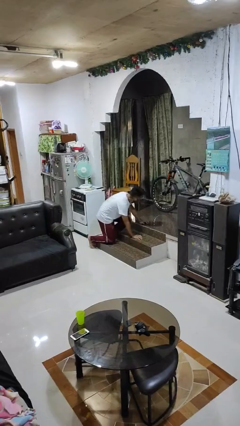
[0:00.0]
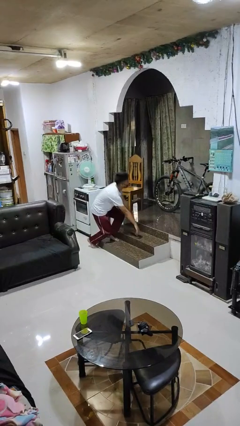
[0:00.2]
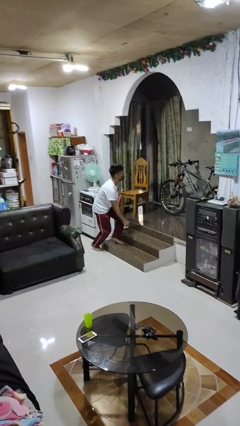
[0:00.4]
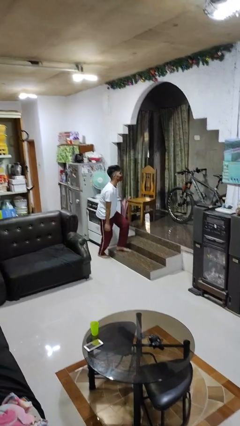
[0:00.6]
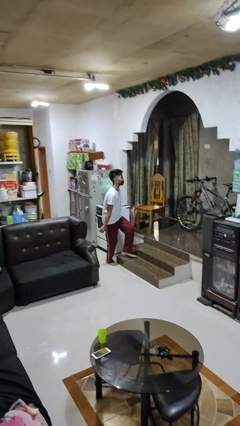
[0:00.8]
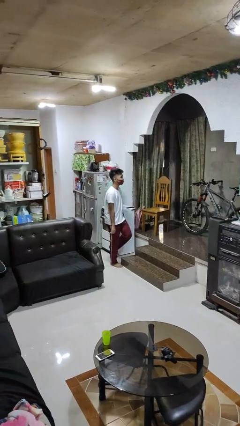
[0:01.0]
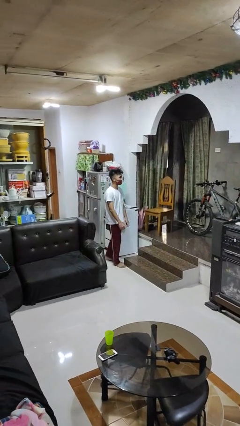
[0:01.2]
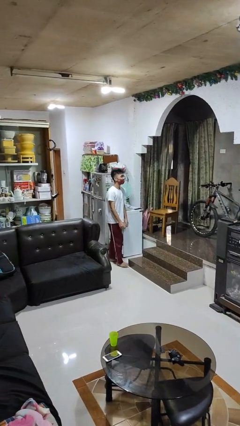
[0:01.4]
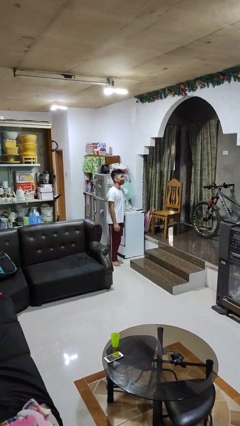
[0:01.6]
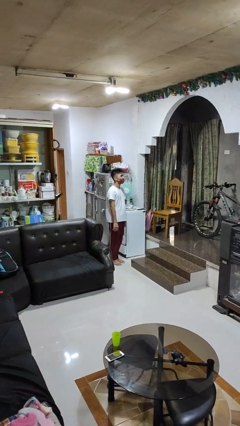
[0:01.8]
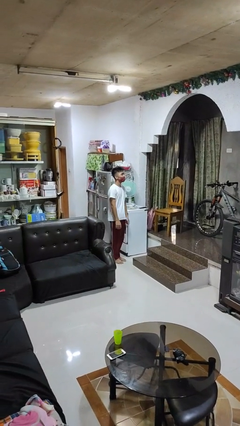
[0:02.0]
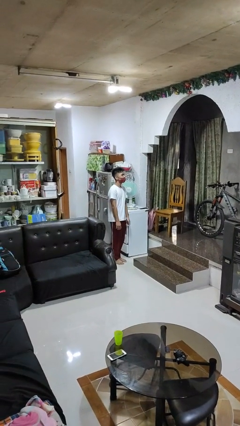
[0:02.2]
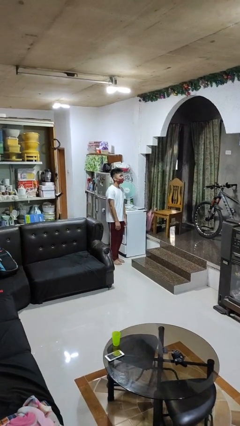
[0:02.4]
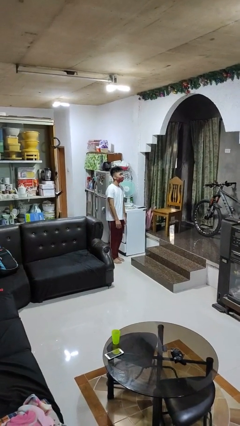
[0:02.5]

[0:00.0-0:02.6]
person stands up from floor

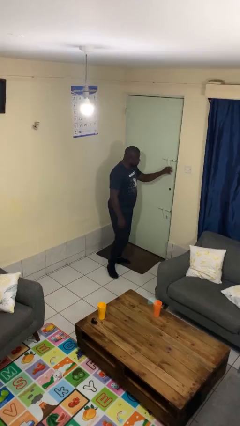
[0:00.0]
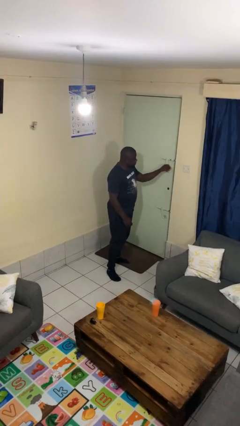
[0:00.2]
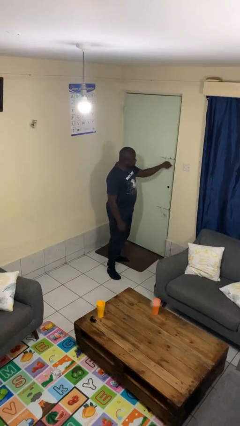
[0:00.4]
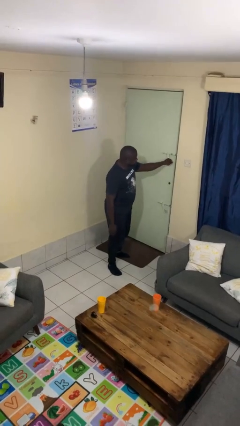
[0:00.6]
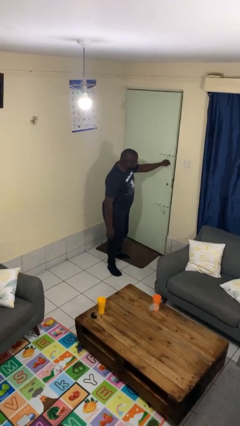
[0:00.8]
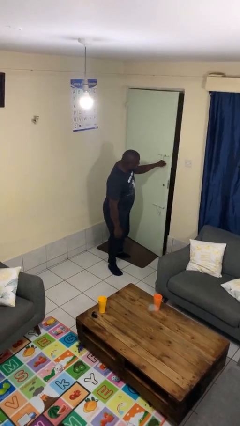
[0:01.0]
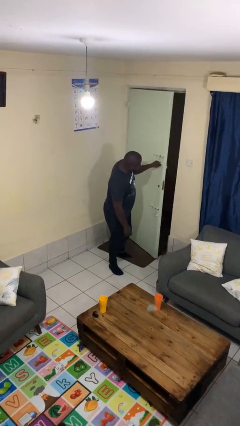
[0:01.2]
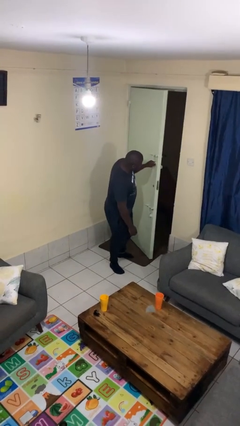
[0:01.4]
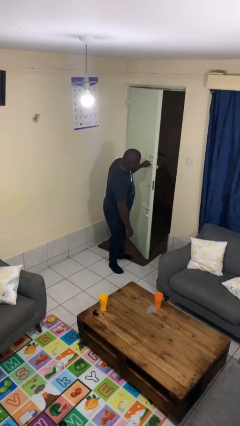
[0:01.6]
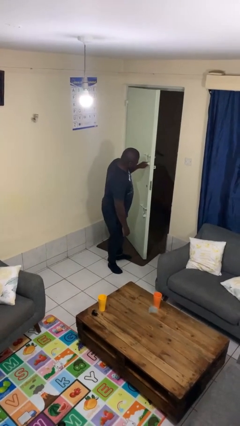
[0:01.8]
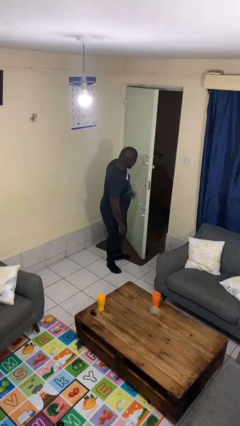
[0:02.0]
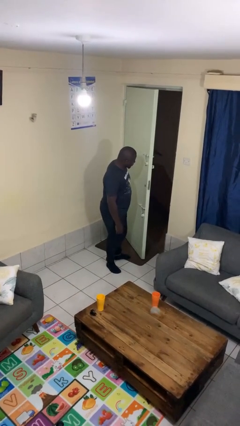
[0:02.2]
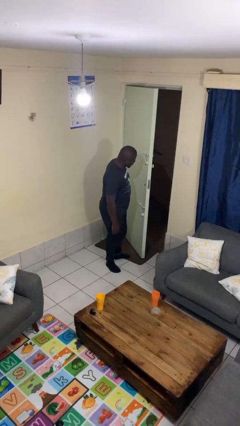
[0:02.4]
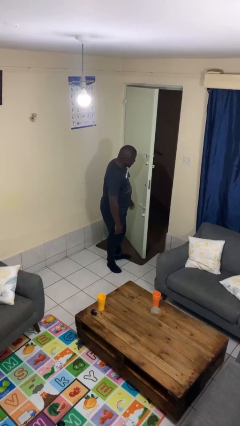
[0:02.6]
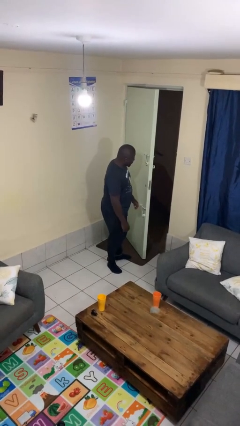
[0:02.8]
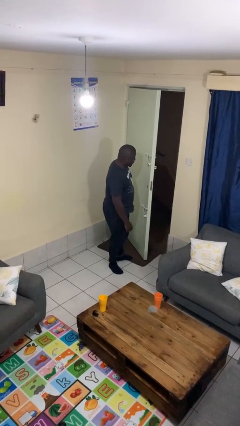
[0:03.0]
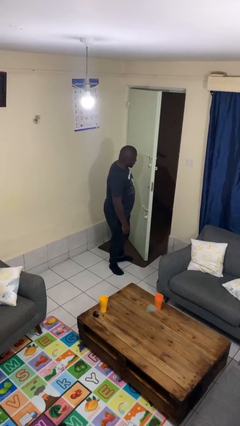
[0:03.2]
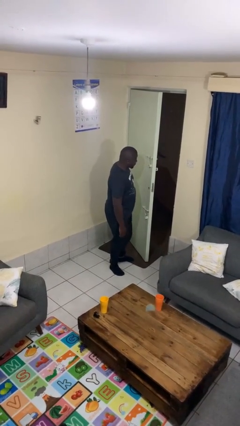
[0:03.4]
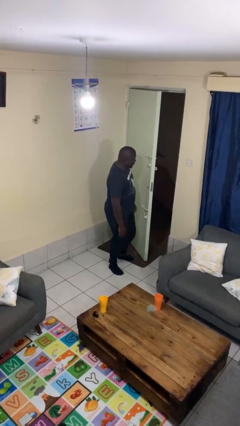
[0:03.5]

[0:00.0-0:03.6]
person opens facility door

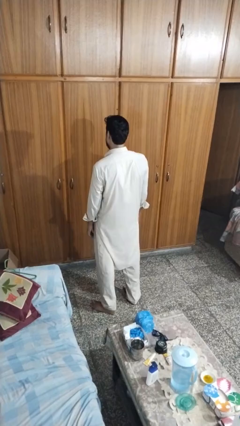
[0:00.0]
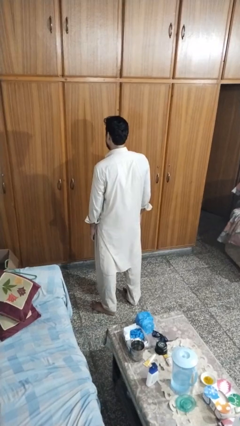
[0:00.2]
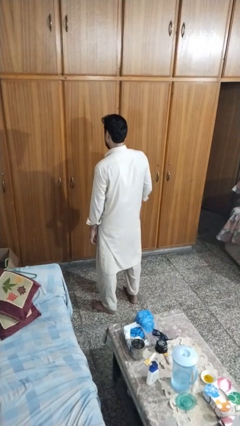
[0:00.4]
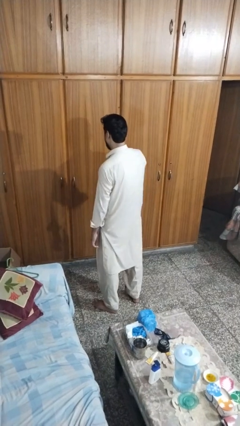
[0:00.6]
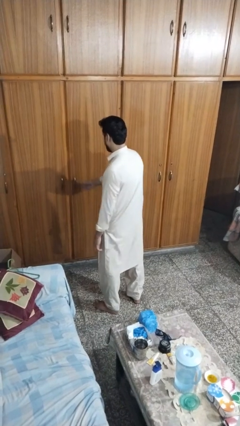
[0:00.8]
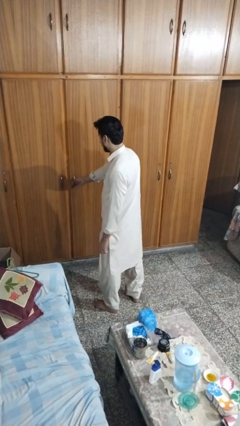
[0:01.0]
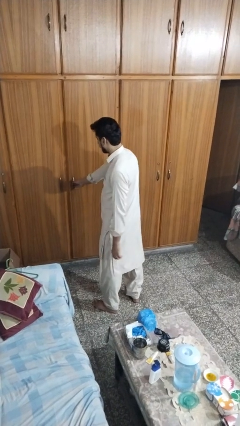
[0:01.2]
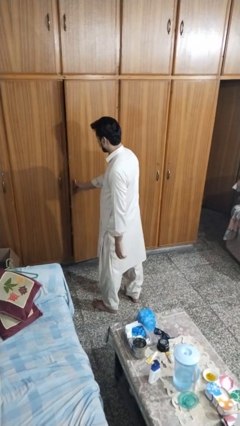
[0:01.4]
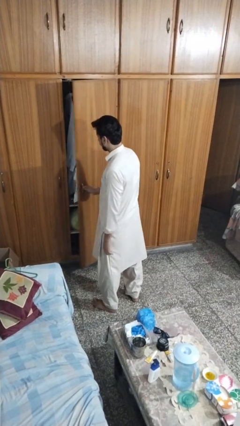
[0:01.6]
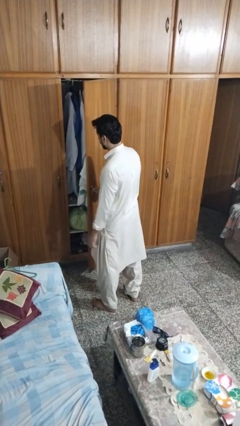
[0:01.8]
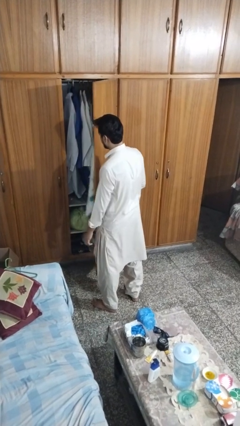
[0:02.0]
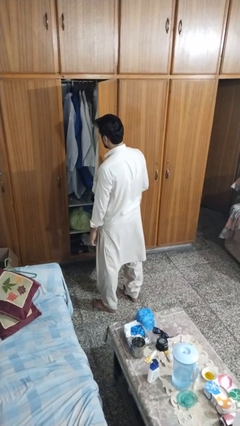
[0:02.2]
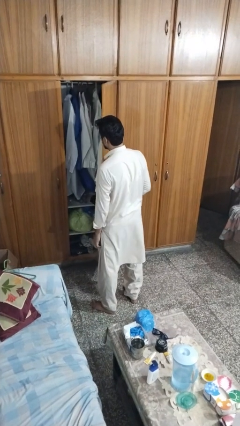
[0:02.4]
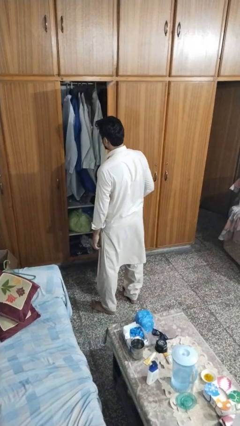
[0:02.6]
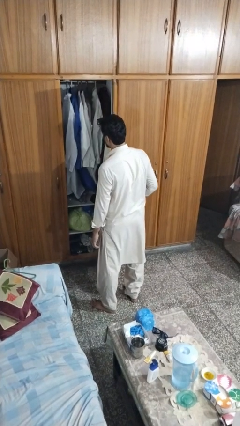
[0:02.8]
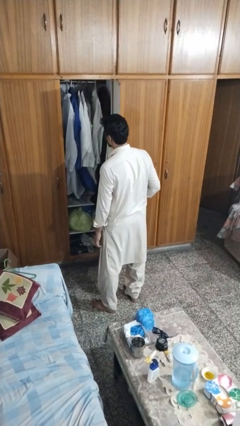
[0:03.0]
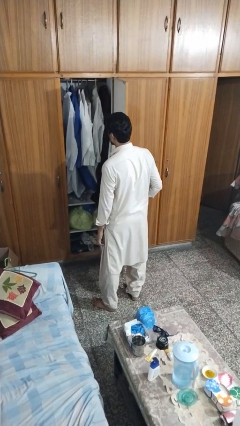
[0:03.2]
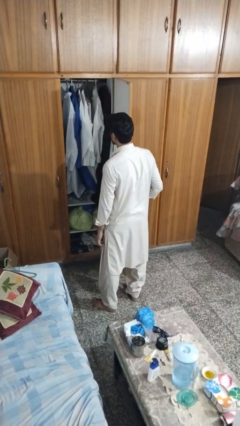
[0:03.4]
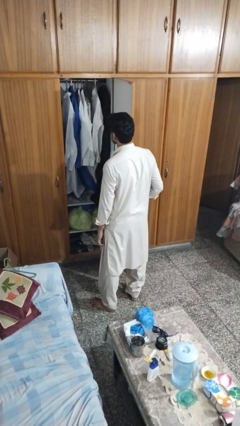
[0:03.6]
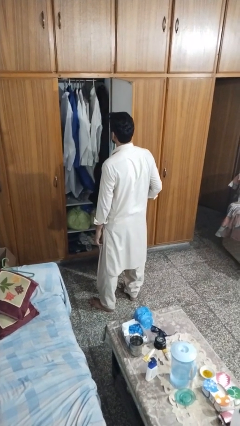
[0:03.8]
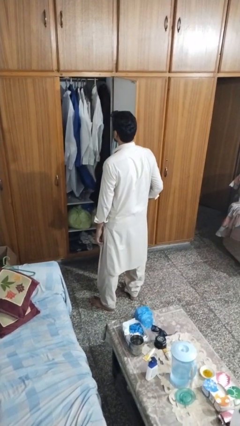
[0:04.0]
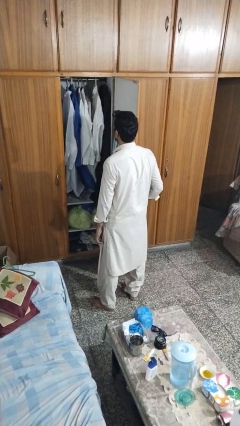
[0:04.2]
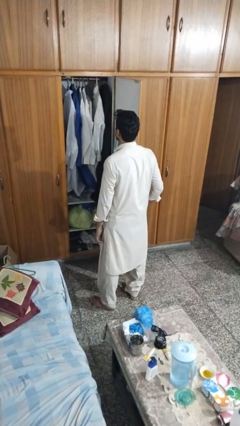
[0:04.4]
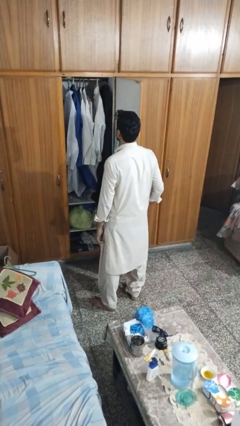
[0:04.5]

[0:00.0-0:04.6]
person opens closet door

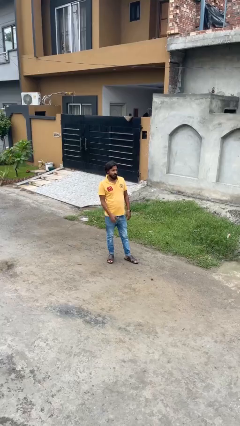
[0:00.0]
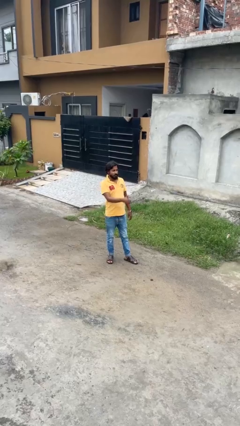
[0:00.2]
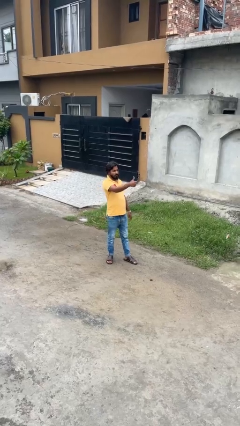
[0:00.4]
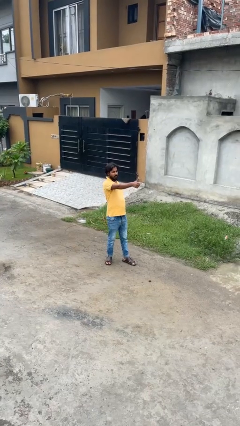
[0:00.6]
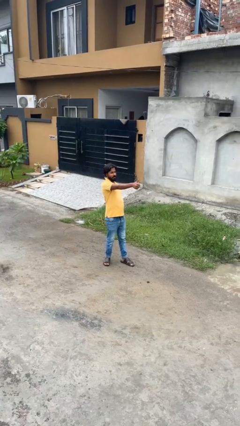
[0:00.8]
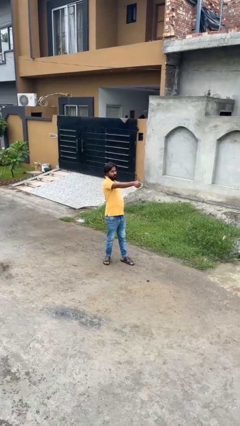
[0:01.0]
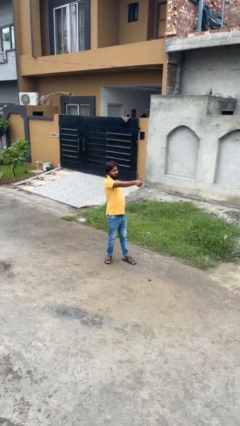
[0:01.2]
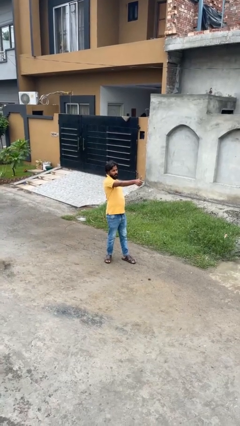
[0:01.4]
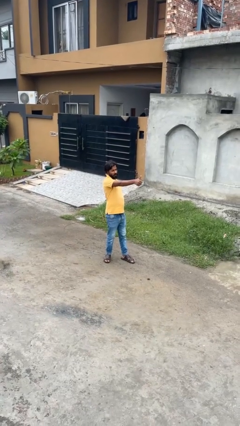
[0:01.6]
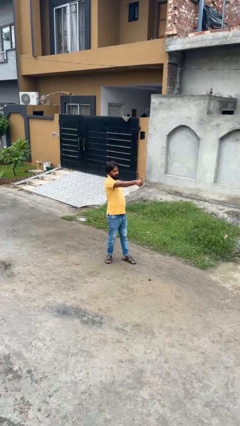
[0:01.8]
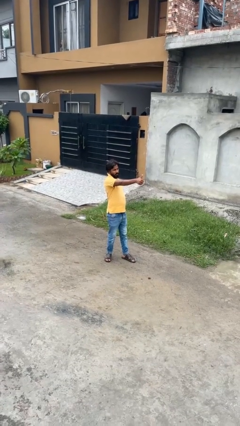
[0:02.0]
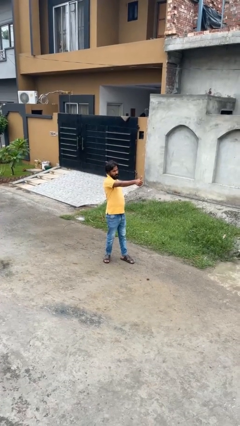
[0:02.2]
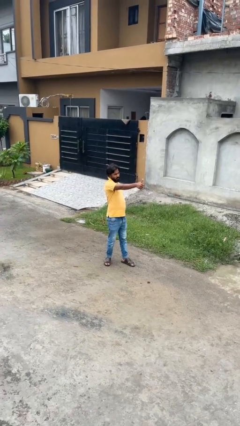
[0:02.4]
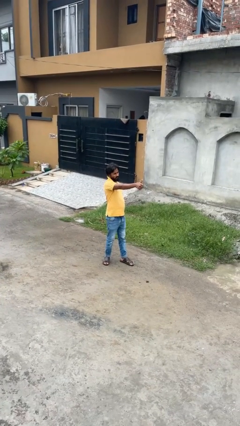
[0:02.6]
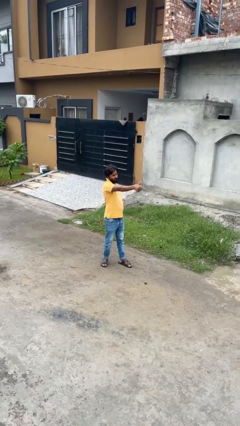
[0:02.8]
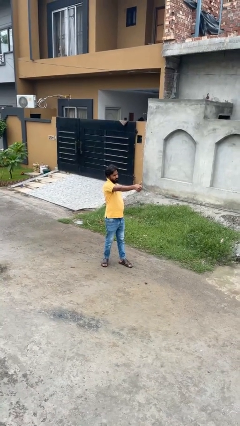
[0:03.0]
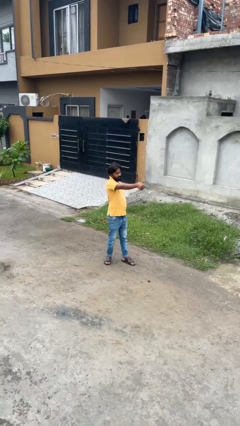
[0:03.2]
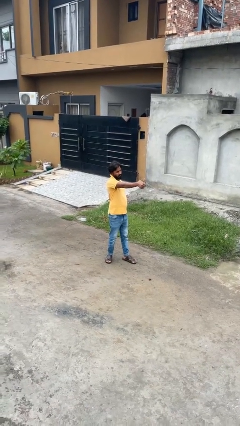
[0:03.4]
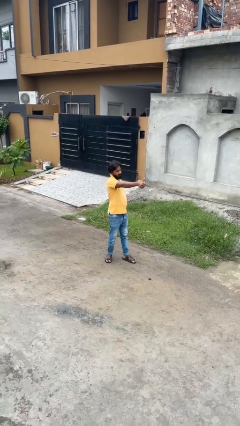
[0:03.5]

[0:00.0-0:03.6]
person gestures thumbs up

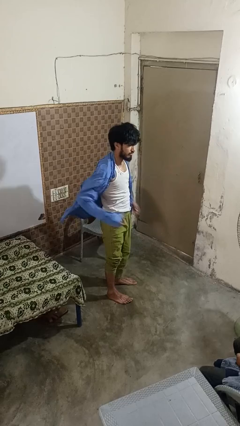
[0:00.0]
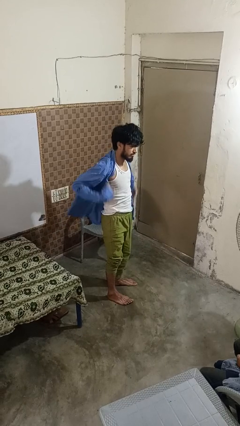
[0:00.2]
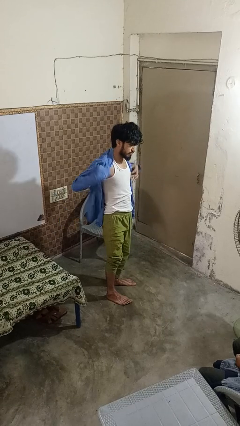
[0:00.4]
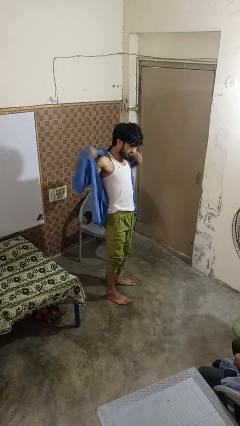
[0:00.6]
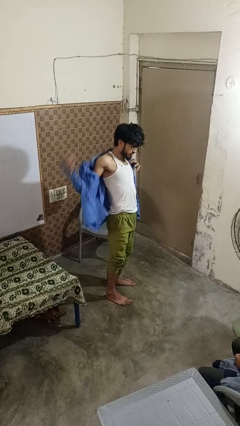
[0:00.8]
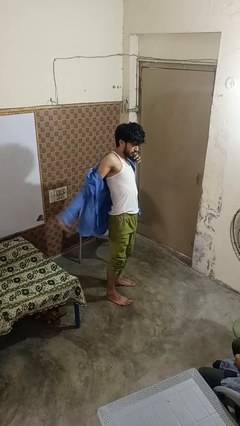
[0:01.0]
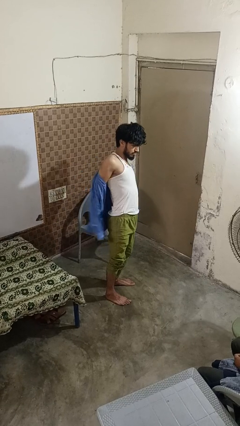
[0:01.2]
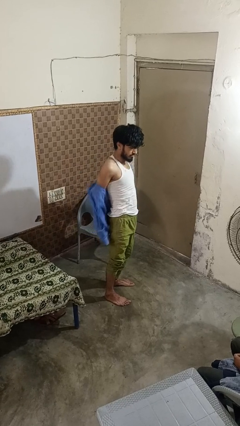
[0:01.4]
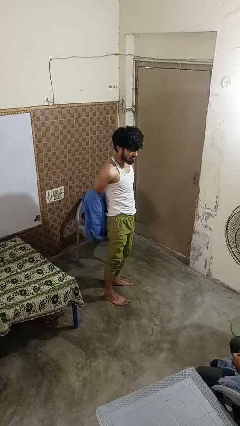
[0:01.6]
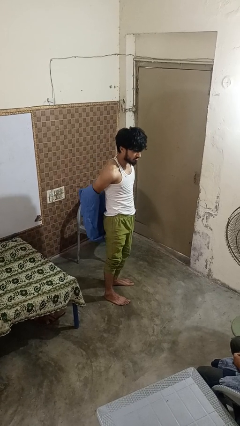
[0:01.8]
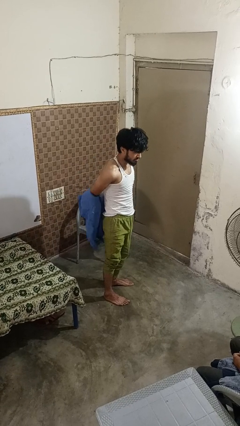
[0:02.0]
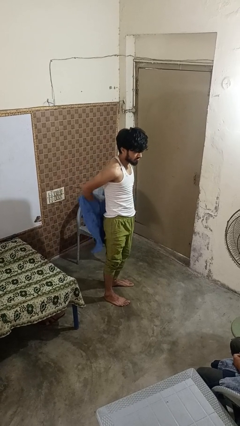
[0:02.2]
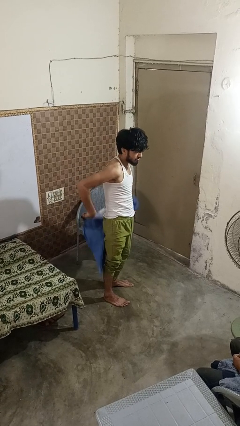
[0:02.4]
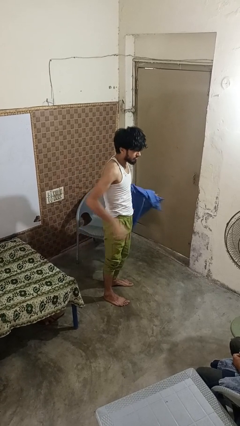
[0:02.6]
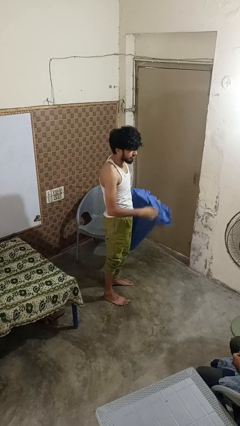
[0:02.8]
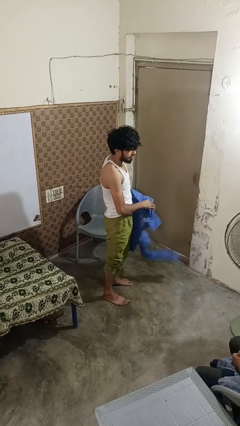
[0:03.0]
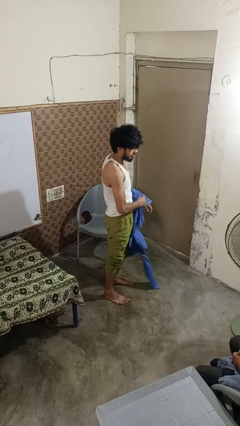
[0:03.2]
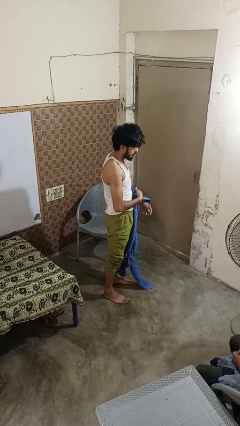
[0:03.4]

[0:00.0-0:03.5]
person takes off shirt
